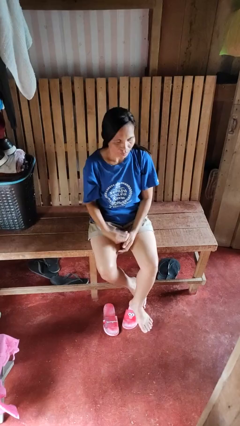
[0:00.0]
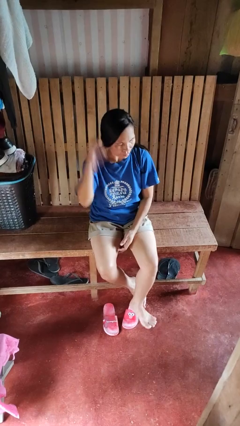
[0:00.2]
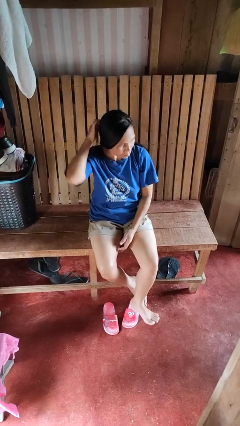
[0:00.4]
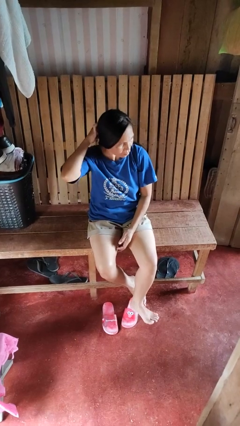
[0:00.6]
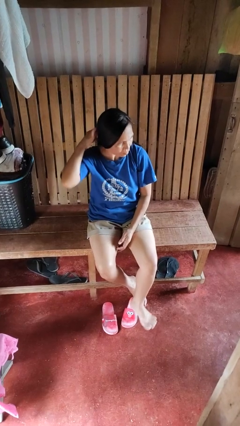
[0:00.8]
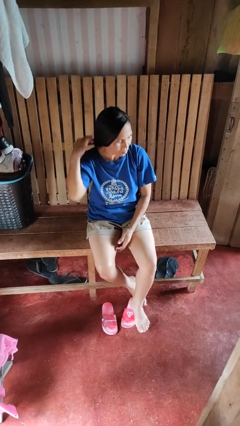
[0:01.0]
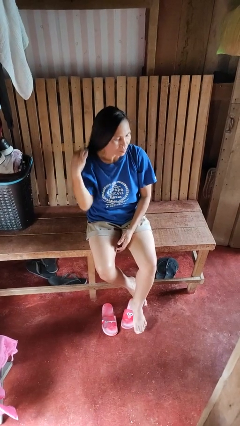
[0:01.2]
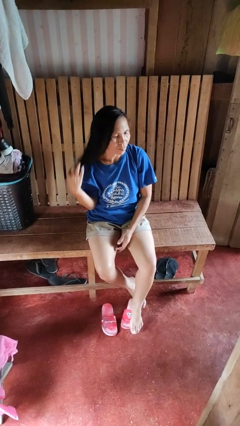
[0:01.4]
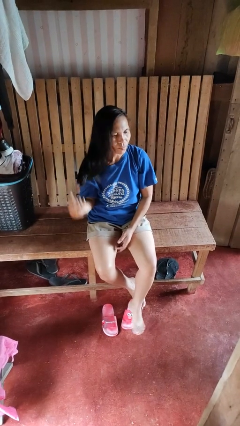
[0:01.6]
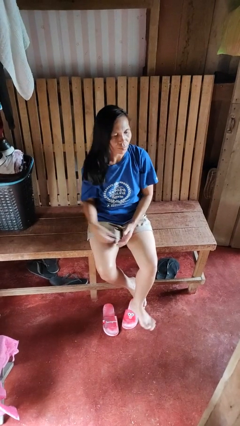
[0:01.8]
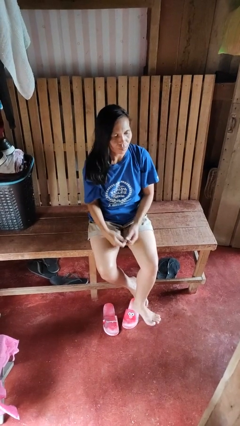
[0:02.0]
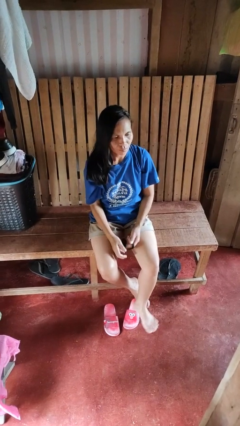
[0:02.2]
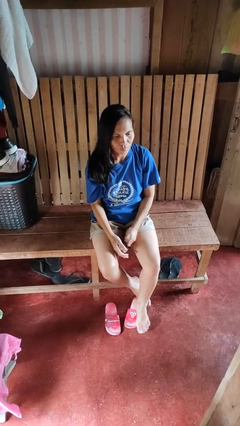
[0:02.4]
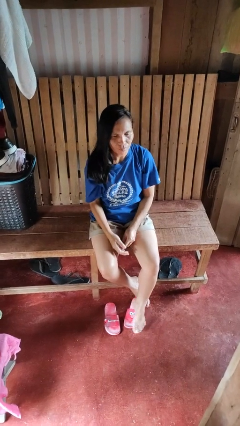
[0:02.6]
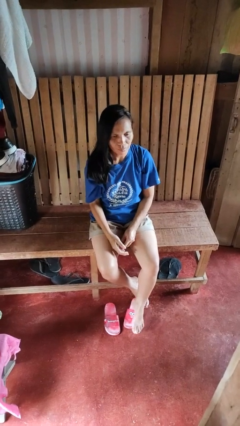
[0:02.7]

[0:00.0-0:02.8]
person takes off hairtie

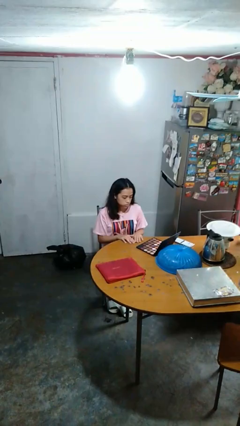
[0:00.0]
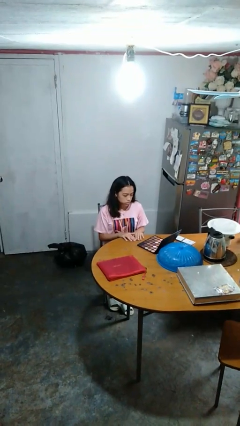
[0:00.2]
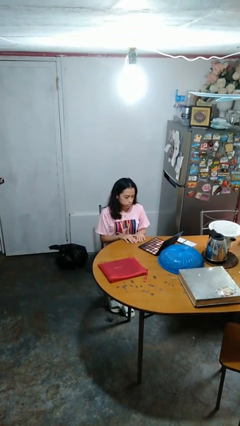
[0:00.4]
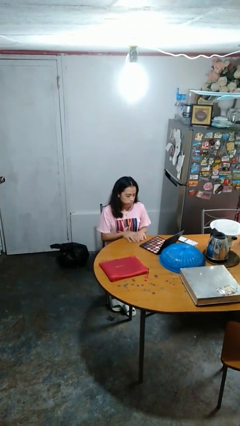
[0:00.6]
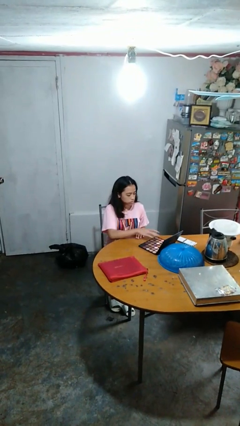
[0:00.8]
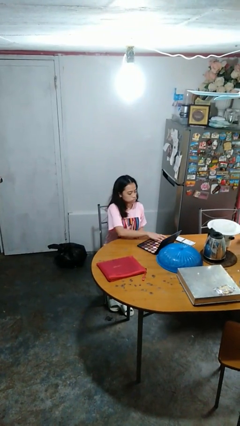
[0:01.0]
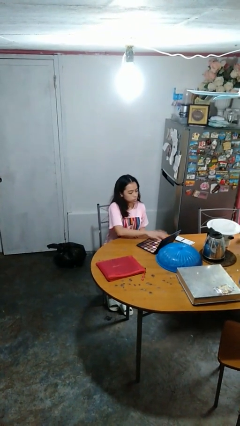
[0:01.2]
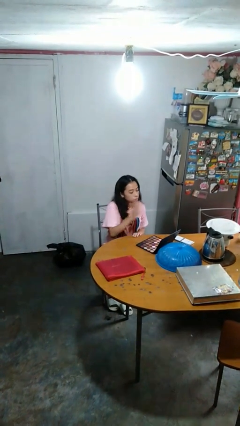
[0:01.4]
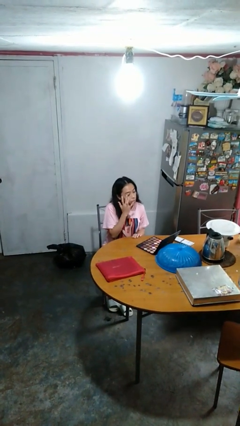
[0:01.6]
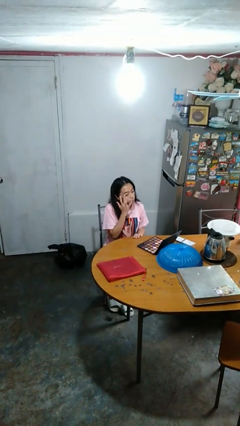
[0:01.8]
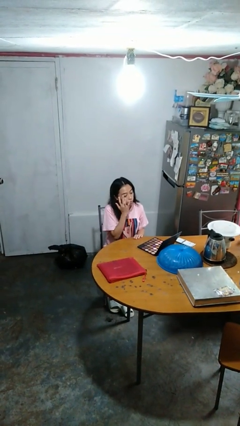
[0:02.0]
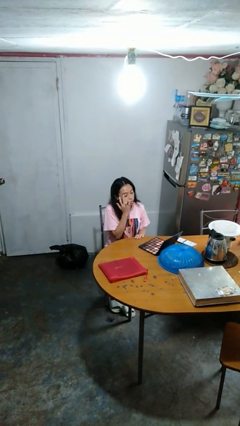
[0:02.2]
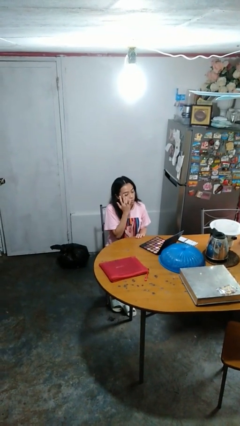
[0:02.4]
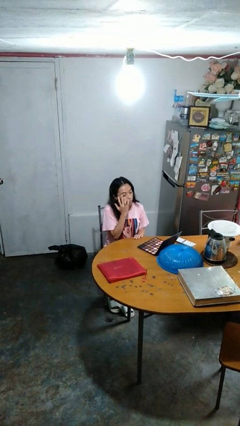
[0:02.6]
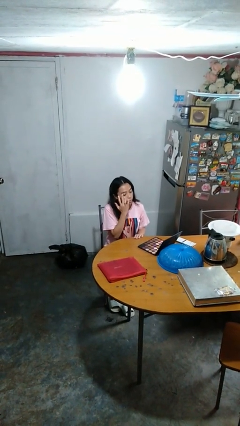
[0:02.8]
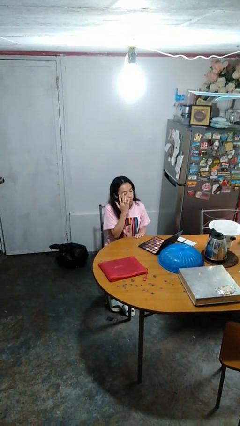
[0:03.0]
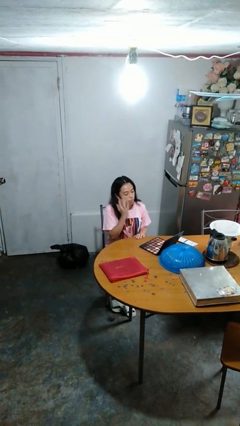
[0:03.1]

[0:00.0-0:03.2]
person applies eye makeup

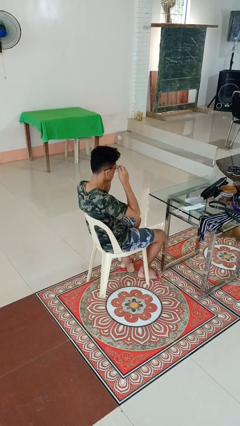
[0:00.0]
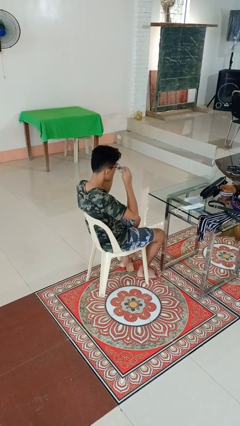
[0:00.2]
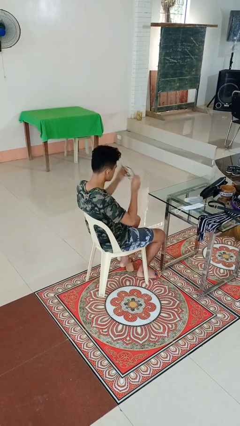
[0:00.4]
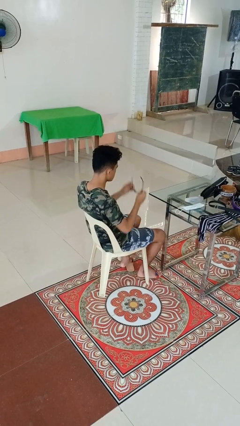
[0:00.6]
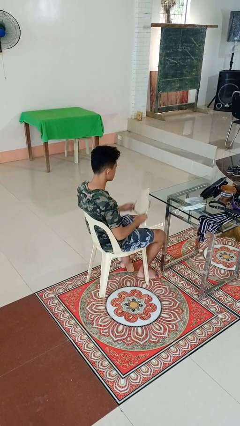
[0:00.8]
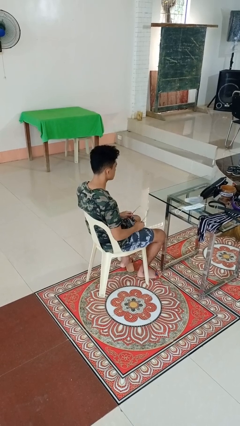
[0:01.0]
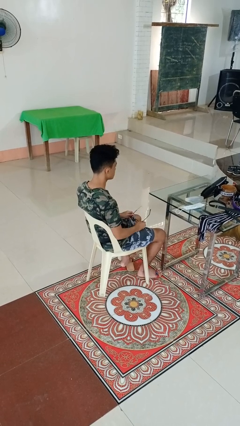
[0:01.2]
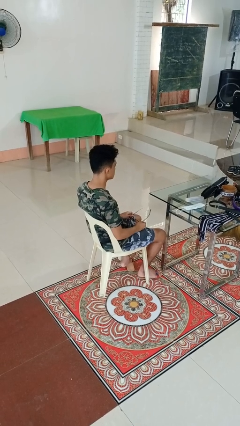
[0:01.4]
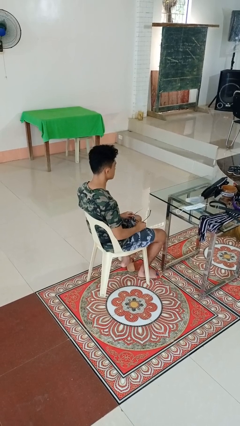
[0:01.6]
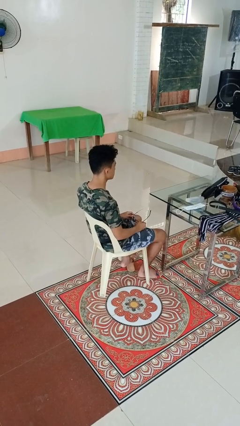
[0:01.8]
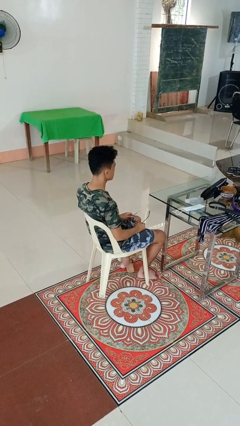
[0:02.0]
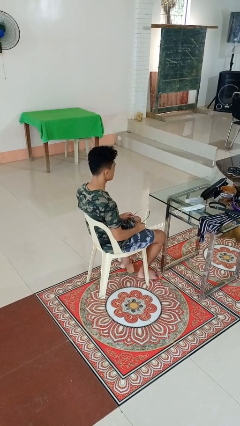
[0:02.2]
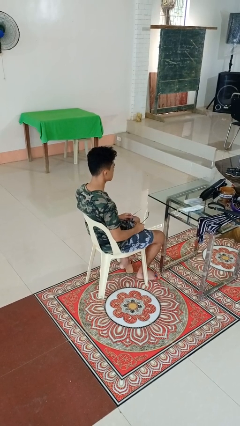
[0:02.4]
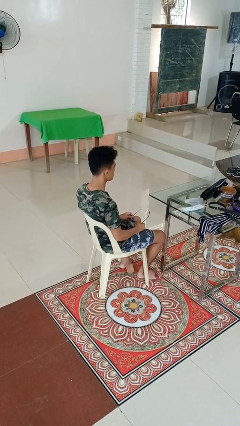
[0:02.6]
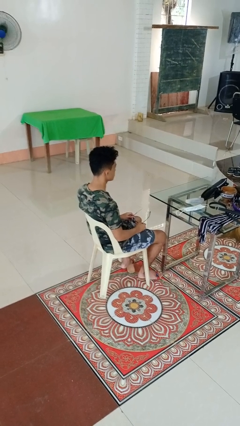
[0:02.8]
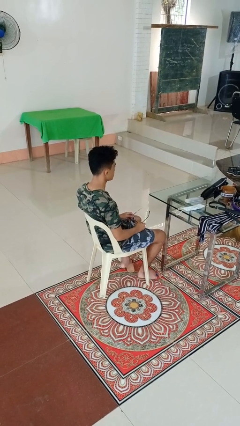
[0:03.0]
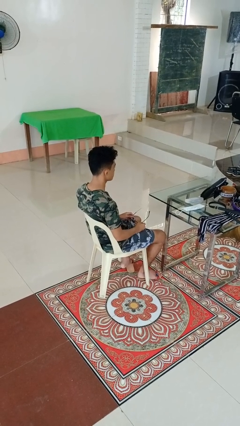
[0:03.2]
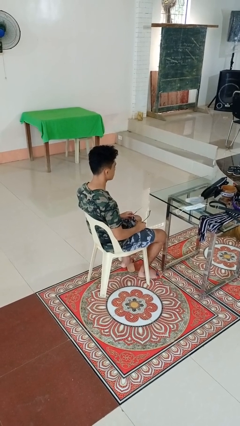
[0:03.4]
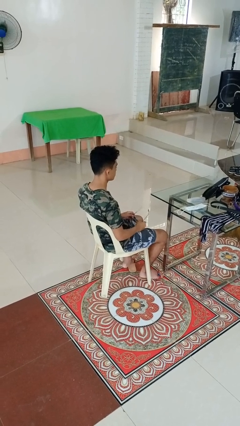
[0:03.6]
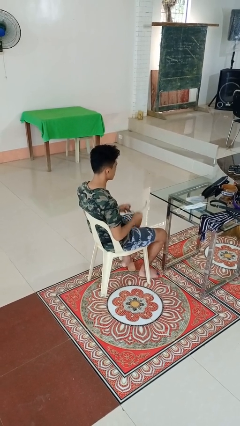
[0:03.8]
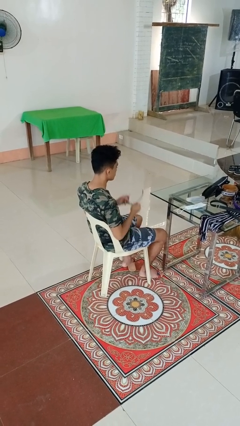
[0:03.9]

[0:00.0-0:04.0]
person takes off glasses

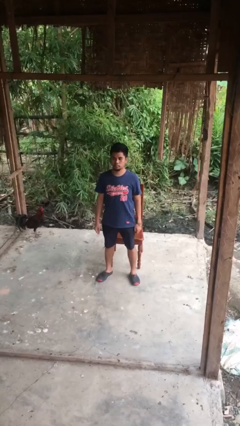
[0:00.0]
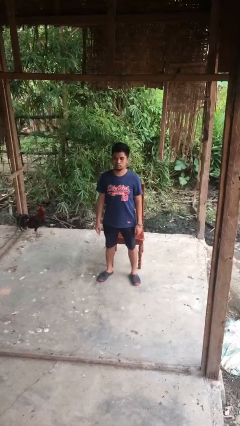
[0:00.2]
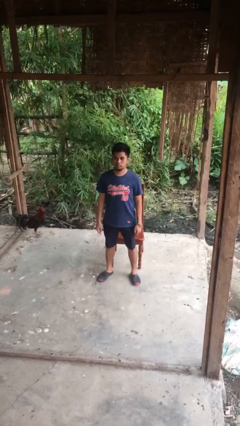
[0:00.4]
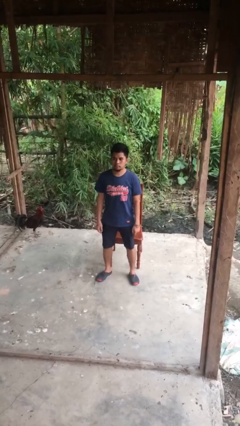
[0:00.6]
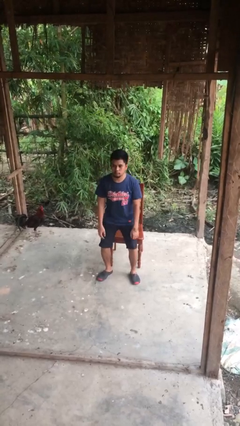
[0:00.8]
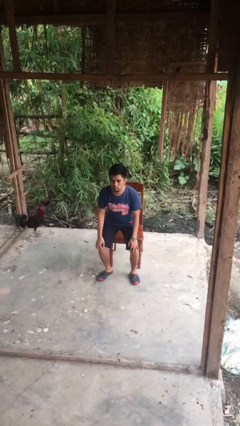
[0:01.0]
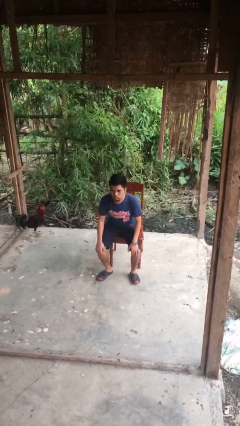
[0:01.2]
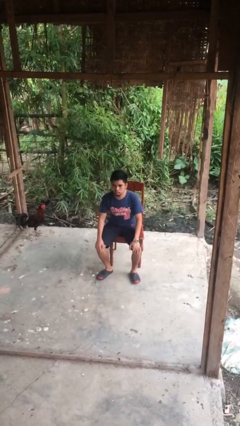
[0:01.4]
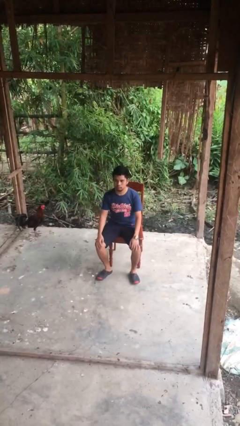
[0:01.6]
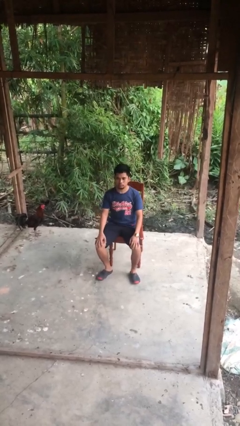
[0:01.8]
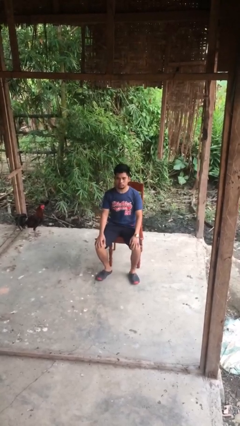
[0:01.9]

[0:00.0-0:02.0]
person sits down

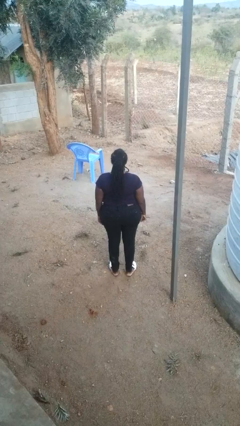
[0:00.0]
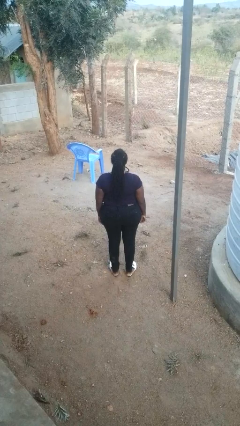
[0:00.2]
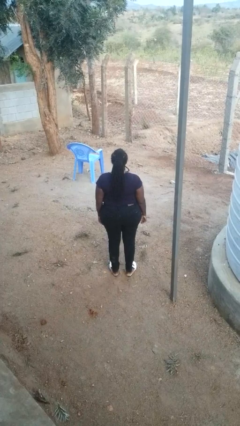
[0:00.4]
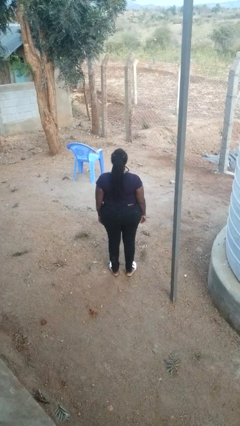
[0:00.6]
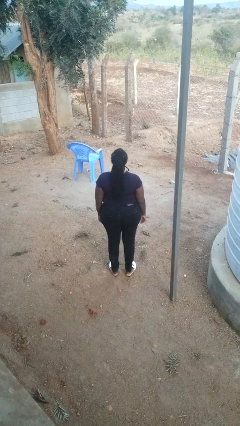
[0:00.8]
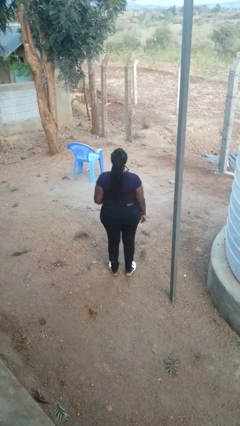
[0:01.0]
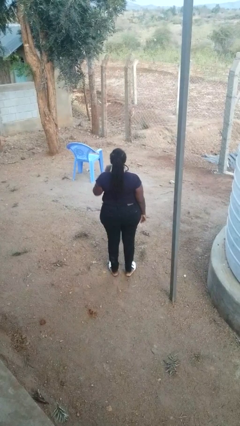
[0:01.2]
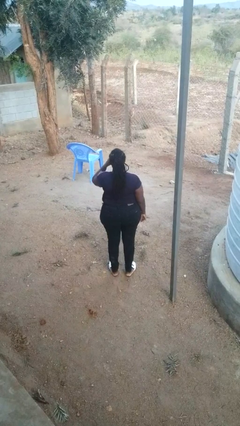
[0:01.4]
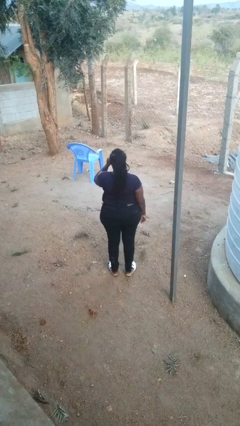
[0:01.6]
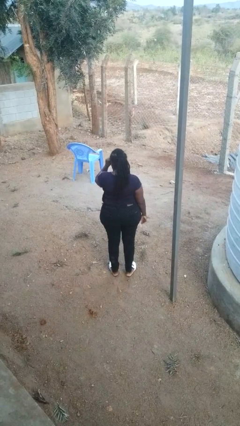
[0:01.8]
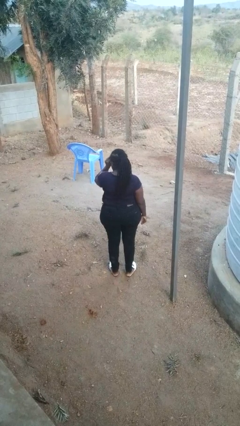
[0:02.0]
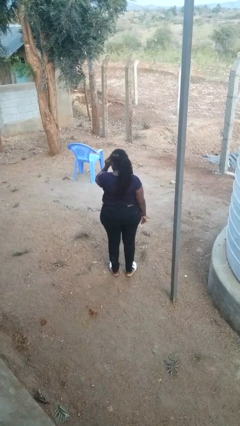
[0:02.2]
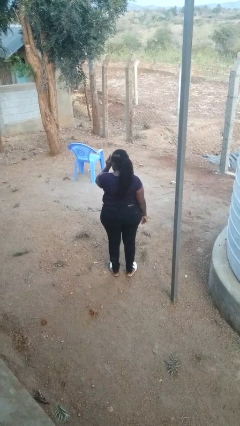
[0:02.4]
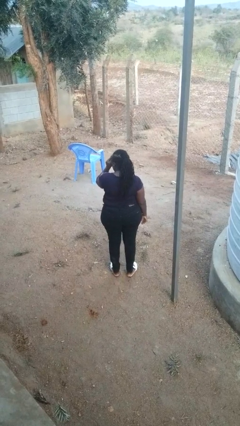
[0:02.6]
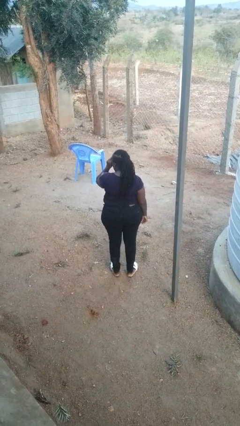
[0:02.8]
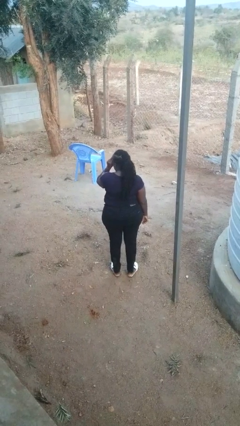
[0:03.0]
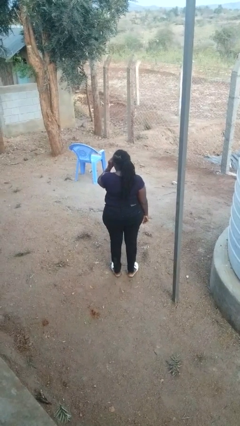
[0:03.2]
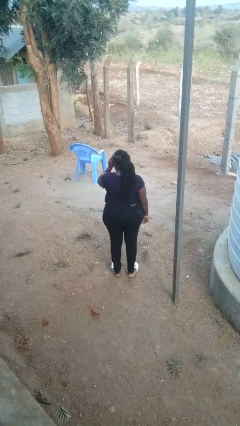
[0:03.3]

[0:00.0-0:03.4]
person rubs eyes

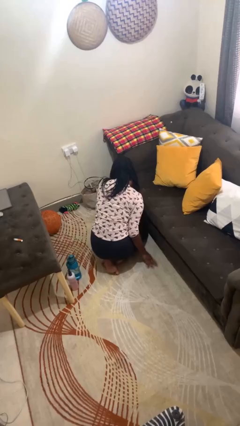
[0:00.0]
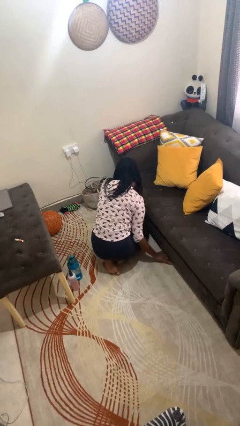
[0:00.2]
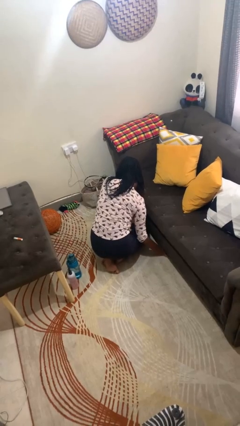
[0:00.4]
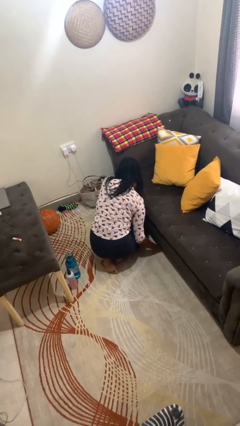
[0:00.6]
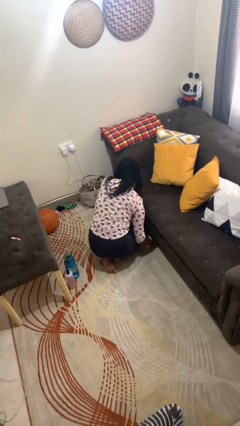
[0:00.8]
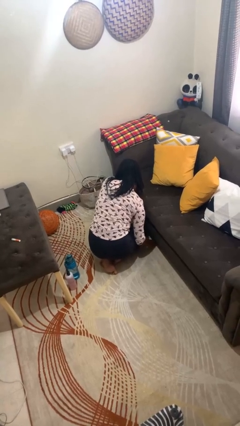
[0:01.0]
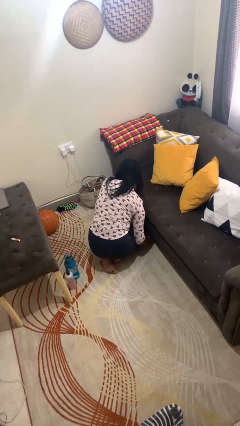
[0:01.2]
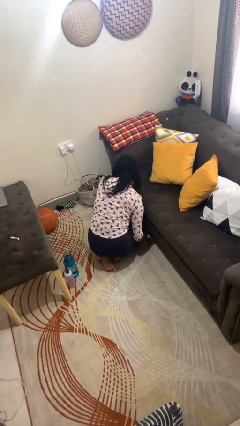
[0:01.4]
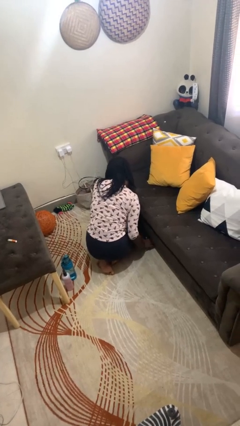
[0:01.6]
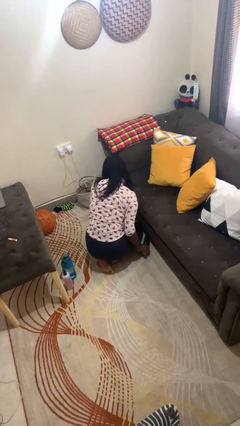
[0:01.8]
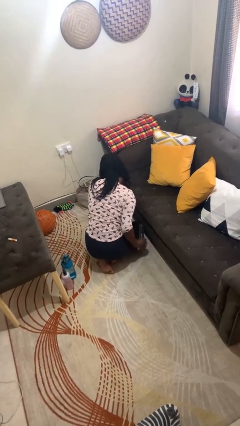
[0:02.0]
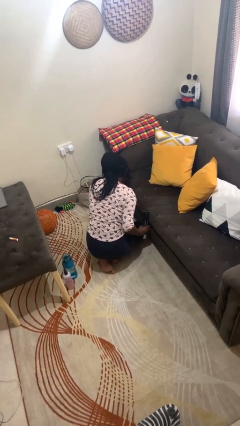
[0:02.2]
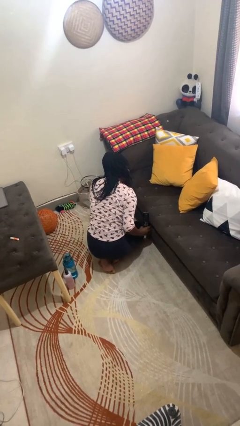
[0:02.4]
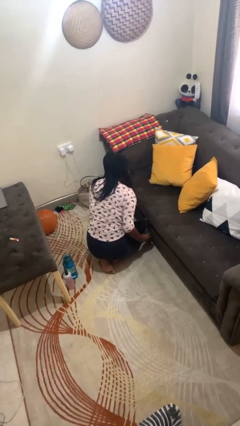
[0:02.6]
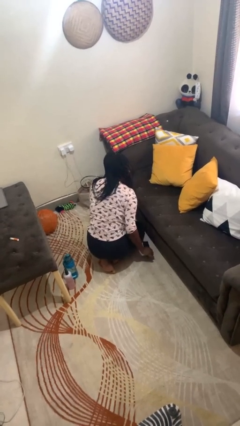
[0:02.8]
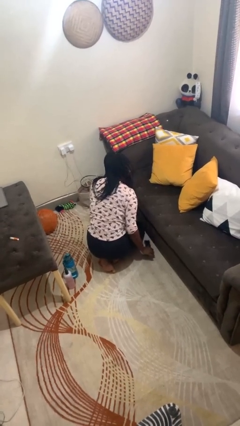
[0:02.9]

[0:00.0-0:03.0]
person searches under couch
